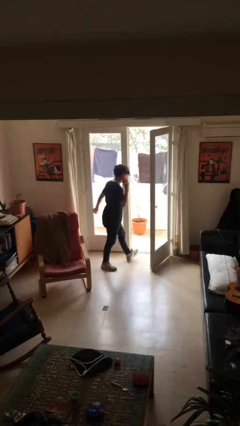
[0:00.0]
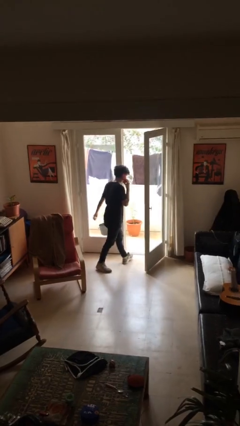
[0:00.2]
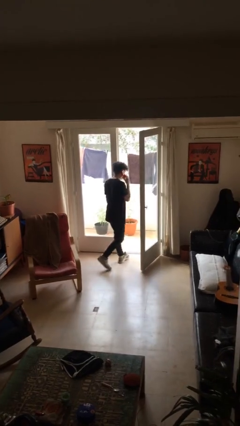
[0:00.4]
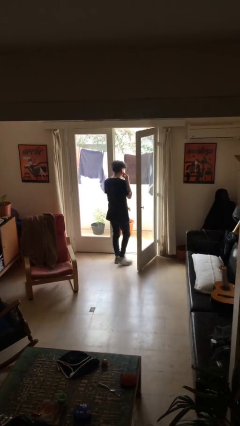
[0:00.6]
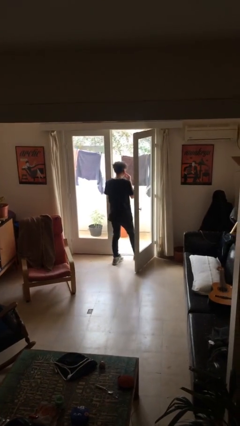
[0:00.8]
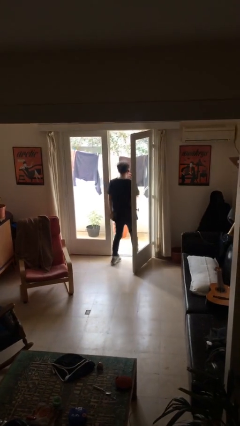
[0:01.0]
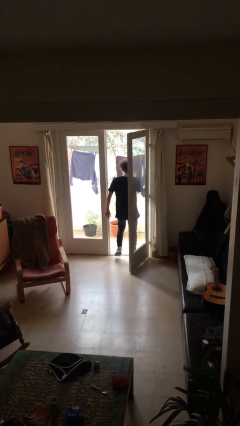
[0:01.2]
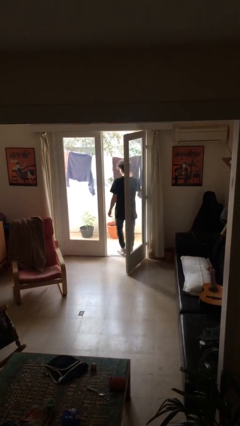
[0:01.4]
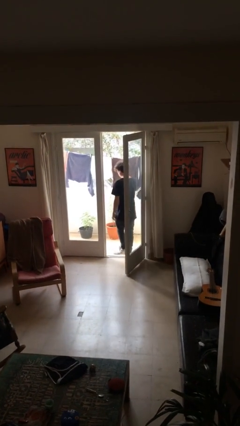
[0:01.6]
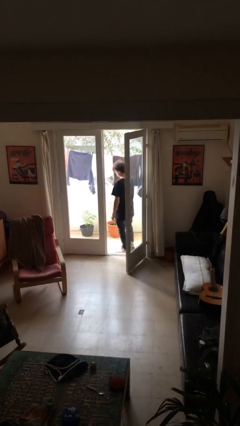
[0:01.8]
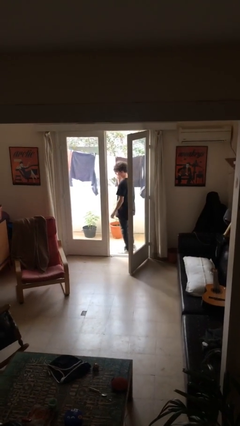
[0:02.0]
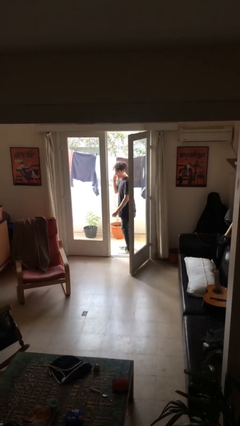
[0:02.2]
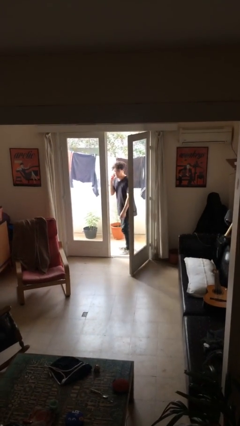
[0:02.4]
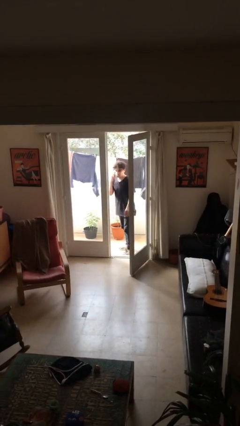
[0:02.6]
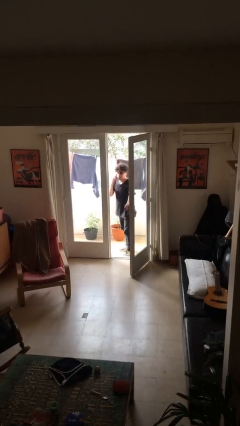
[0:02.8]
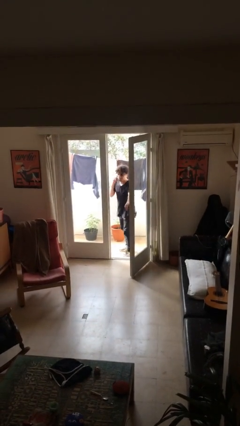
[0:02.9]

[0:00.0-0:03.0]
person exits scene through structure

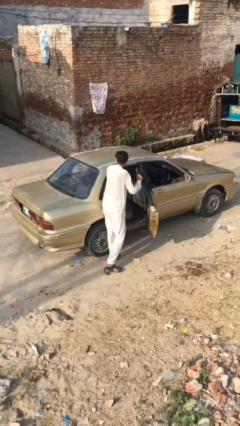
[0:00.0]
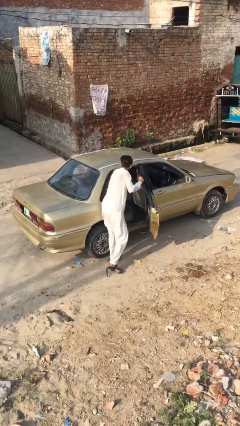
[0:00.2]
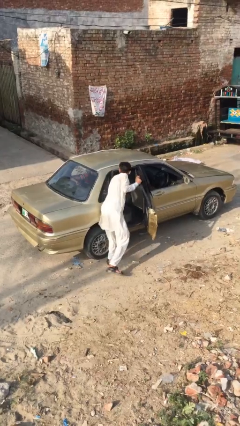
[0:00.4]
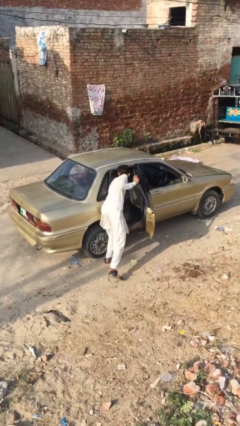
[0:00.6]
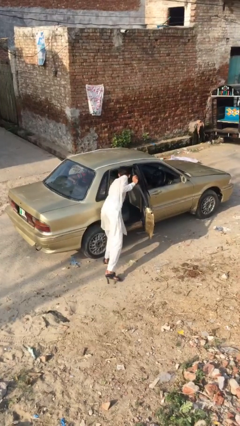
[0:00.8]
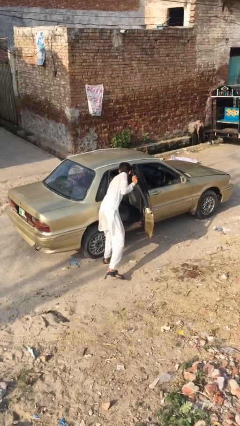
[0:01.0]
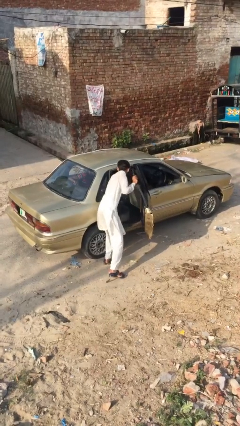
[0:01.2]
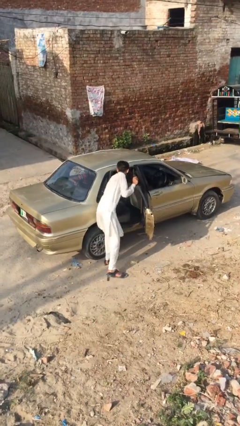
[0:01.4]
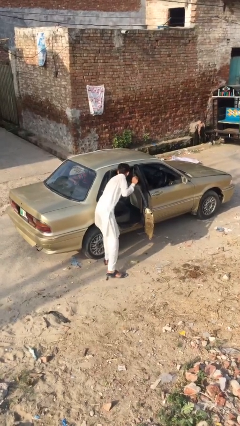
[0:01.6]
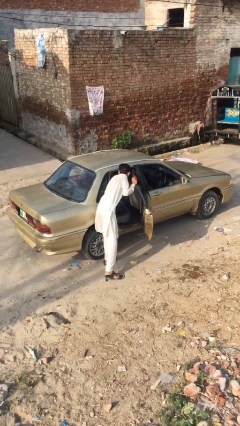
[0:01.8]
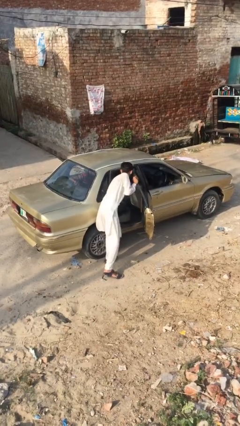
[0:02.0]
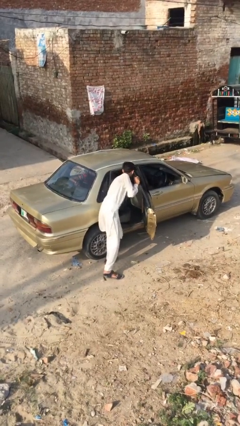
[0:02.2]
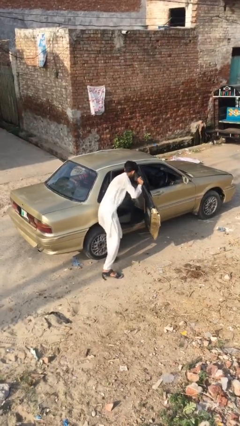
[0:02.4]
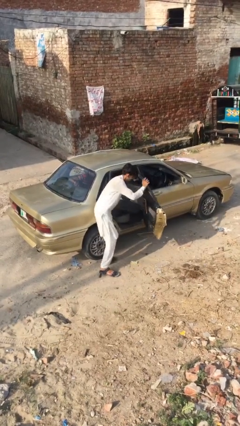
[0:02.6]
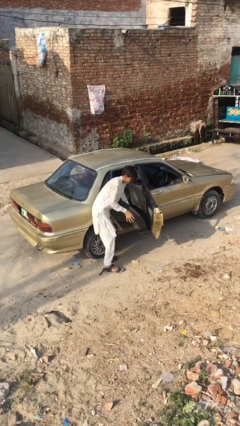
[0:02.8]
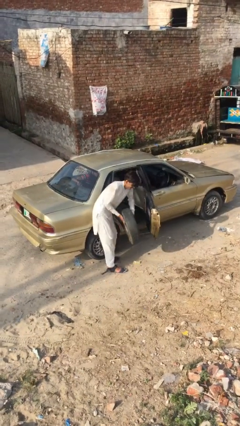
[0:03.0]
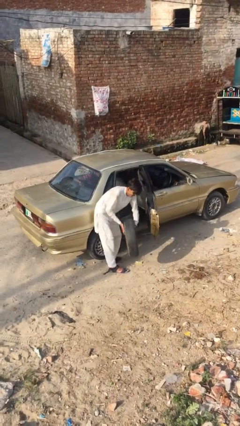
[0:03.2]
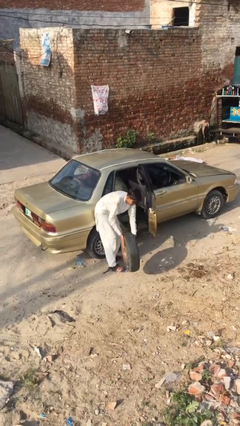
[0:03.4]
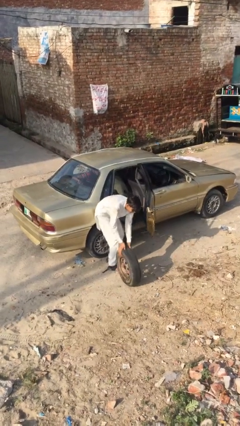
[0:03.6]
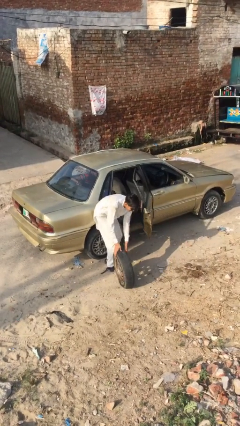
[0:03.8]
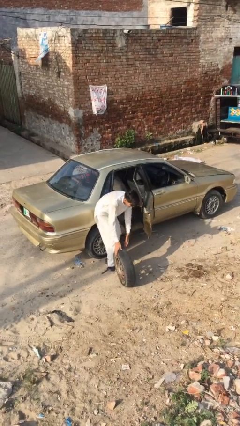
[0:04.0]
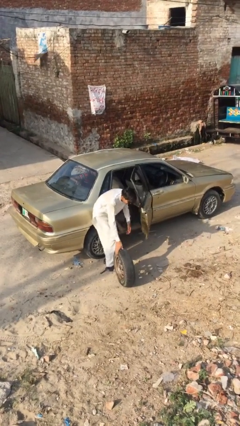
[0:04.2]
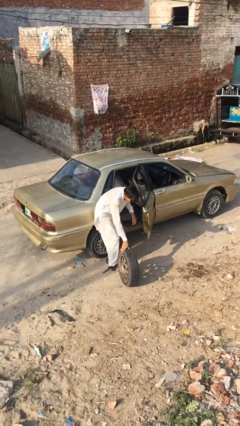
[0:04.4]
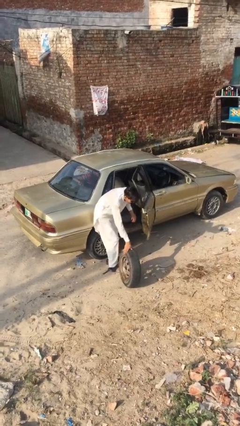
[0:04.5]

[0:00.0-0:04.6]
person unloads car

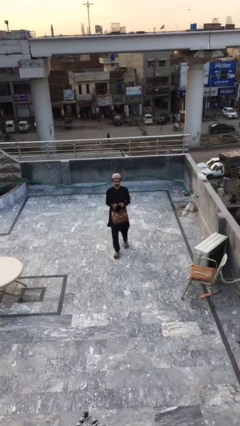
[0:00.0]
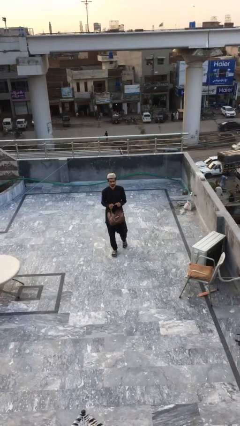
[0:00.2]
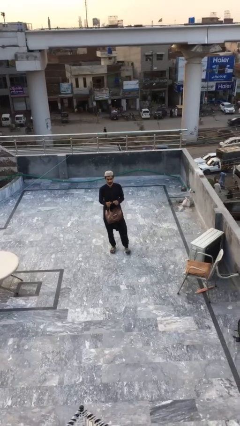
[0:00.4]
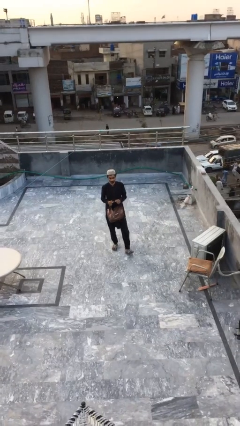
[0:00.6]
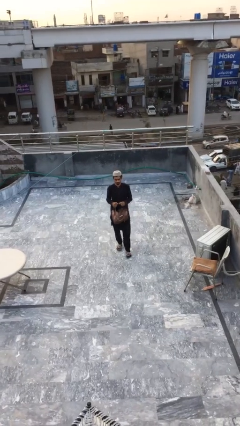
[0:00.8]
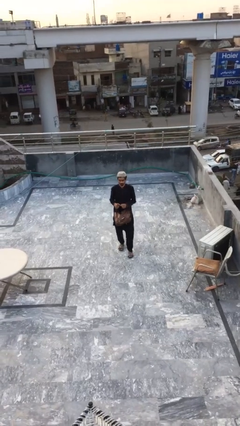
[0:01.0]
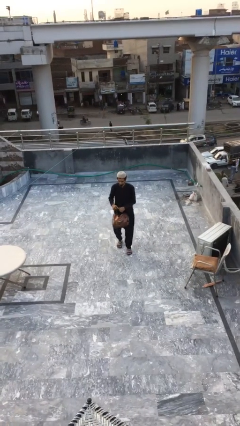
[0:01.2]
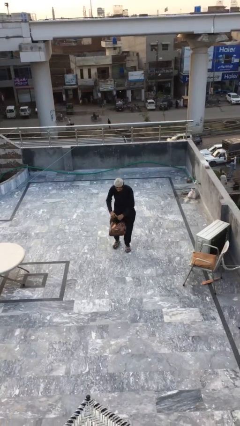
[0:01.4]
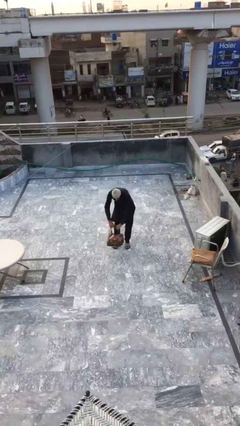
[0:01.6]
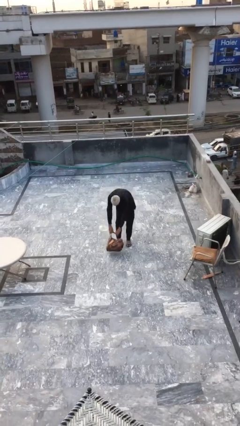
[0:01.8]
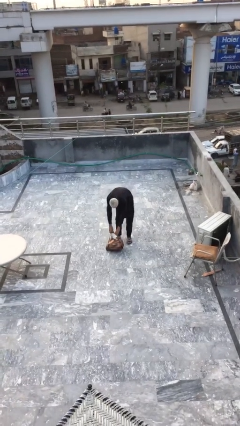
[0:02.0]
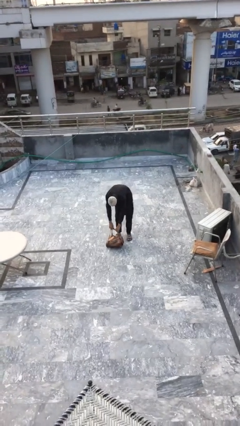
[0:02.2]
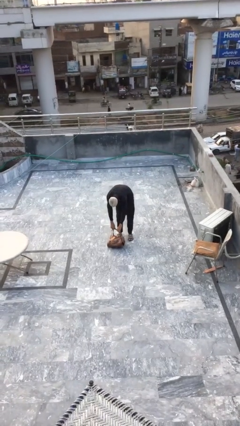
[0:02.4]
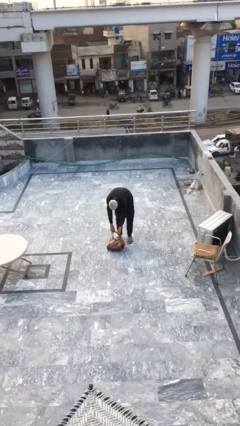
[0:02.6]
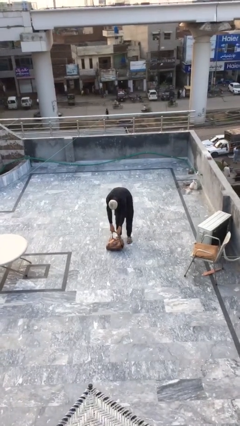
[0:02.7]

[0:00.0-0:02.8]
person puts down object on floor

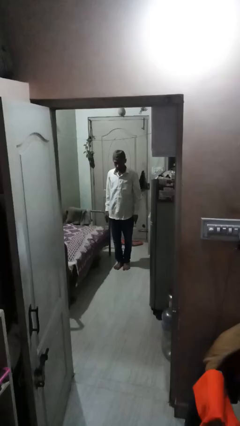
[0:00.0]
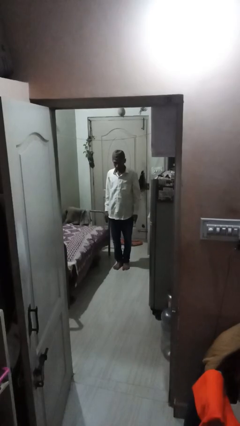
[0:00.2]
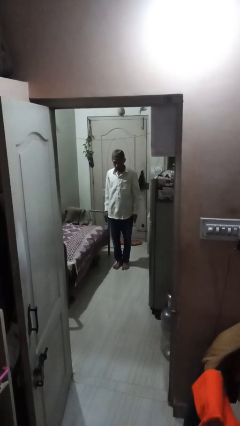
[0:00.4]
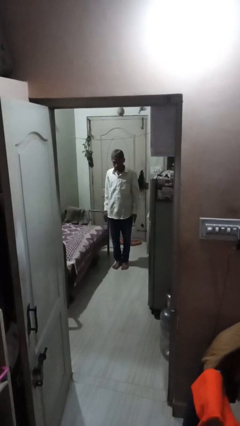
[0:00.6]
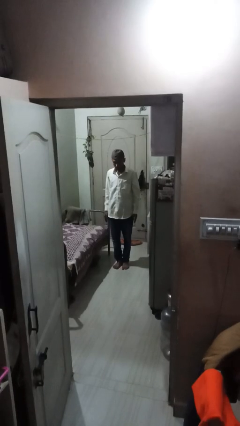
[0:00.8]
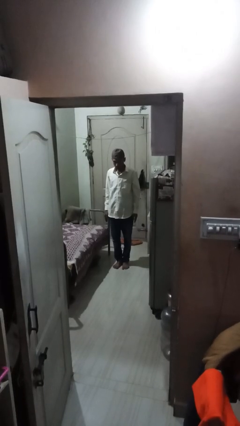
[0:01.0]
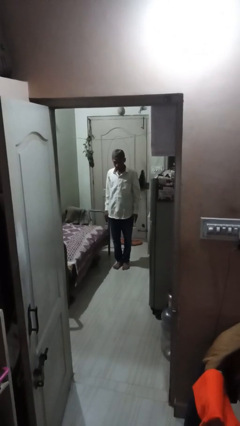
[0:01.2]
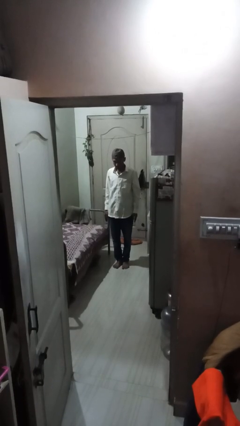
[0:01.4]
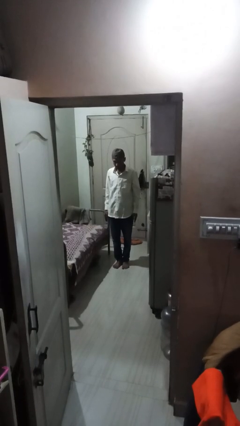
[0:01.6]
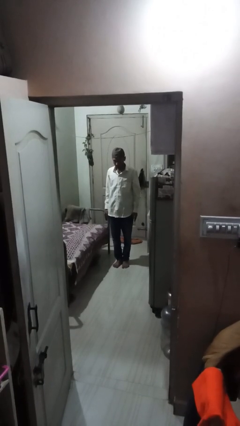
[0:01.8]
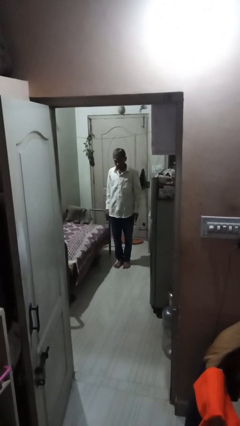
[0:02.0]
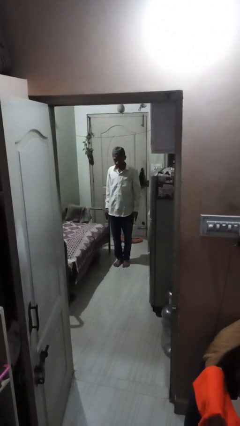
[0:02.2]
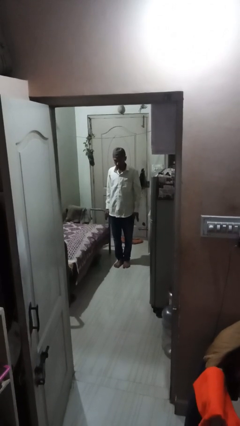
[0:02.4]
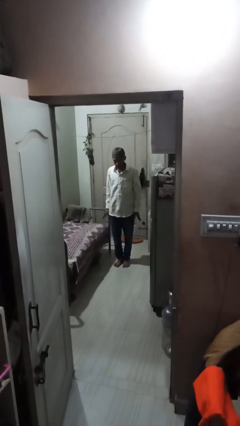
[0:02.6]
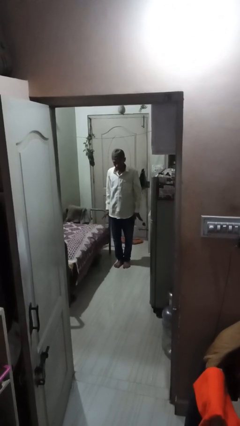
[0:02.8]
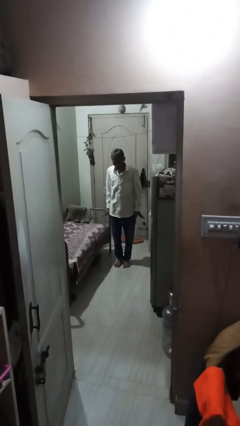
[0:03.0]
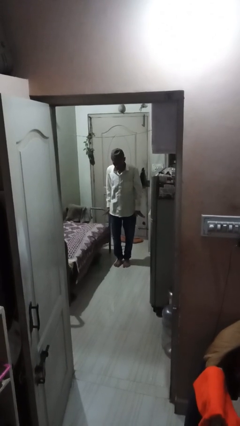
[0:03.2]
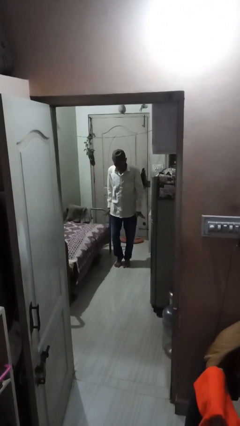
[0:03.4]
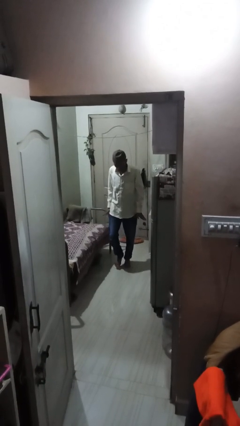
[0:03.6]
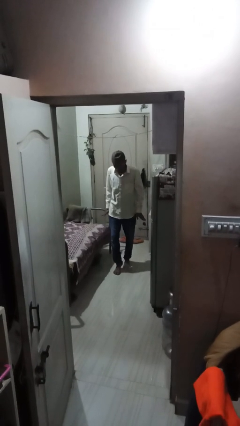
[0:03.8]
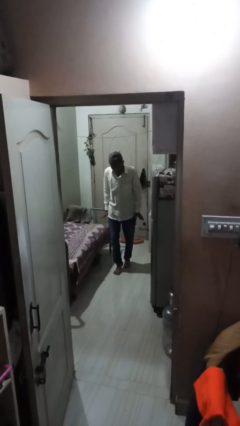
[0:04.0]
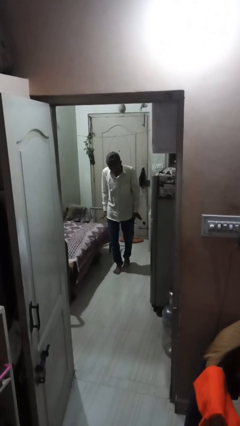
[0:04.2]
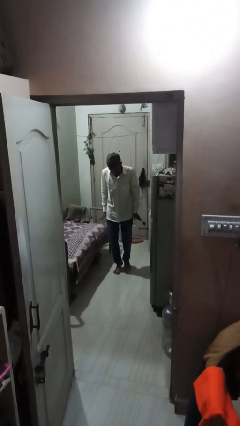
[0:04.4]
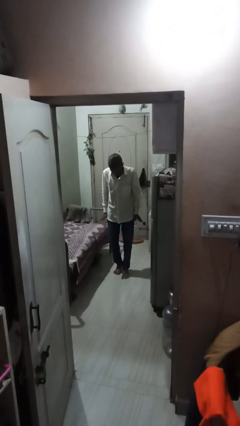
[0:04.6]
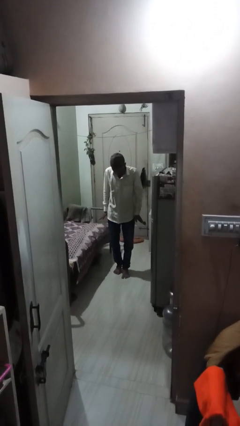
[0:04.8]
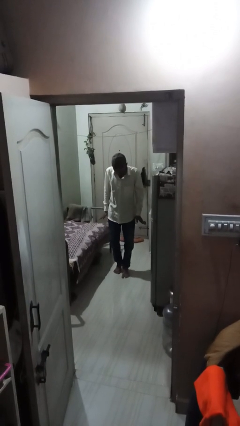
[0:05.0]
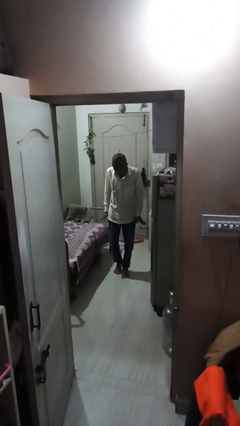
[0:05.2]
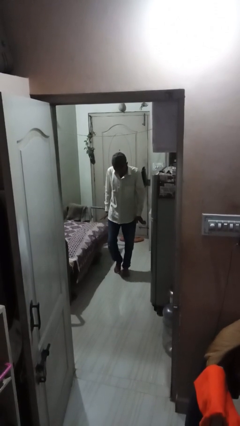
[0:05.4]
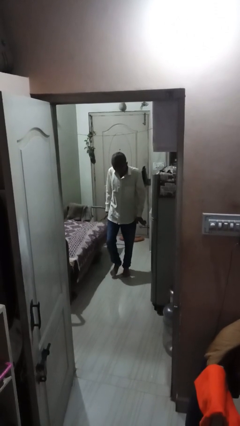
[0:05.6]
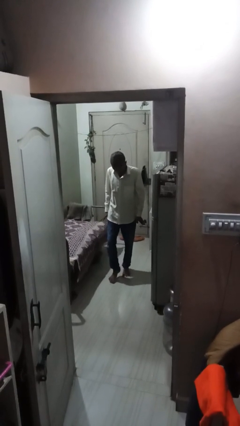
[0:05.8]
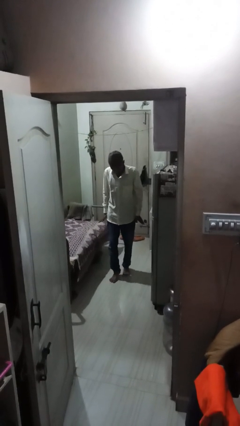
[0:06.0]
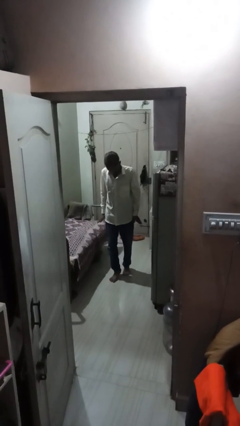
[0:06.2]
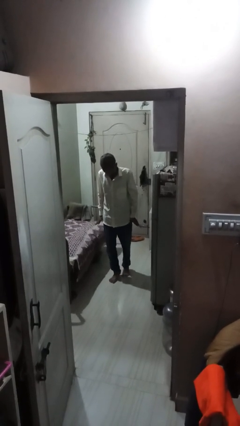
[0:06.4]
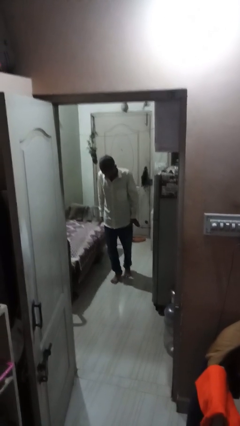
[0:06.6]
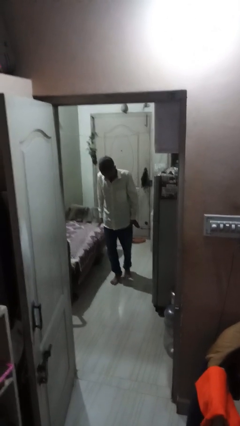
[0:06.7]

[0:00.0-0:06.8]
person walks tiptoe

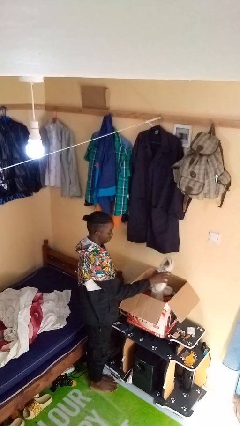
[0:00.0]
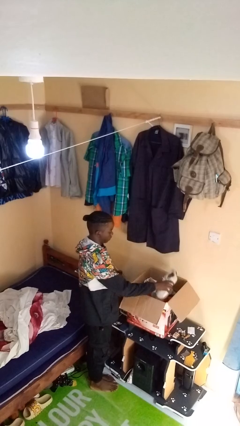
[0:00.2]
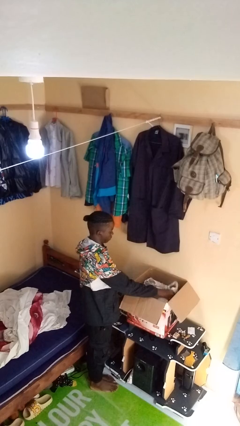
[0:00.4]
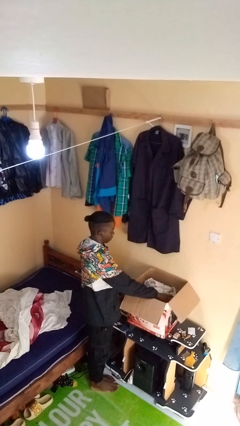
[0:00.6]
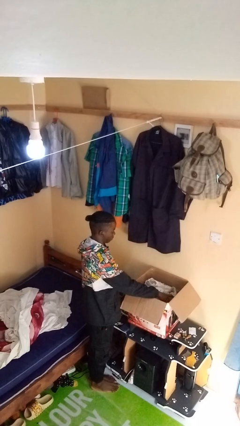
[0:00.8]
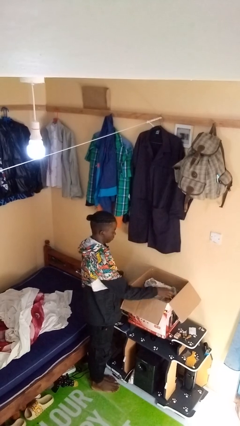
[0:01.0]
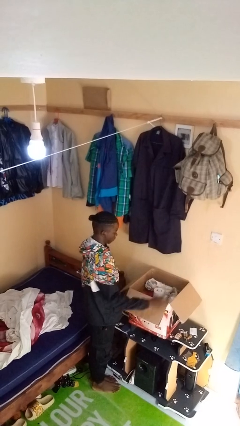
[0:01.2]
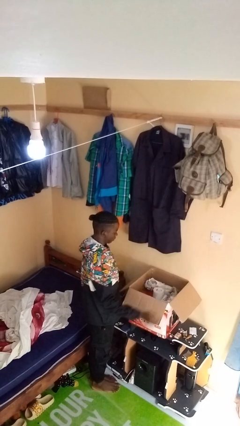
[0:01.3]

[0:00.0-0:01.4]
person puts object into box
